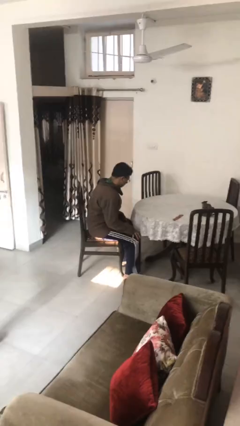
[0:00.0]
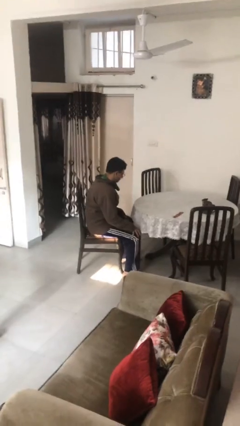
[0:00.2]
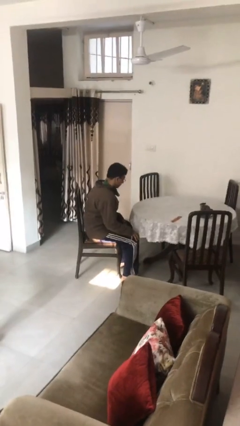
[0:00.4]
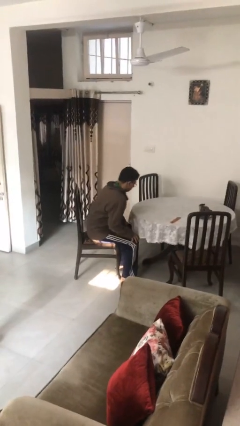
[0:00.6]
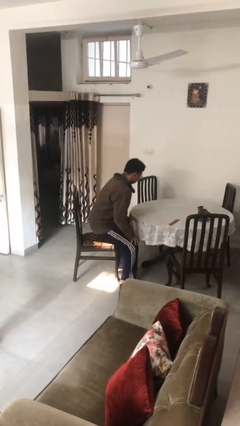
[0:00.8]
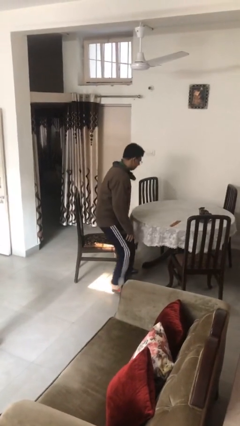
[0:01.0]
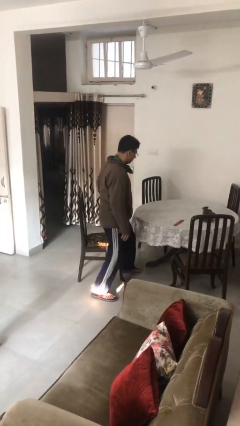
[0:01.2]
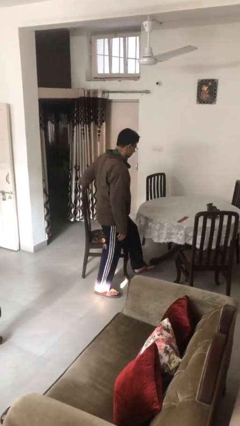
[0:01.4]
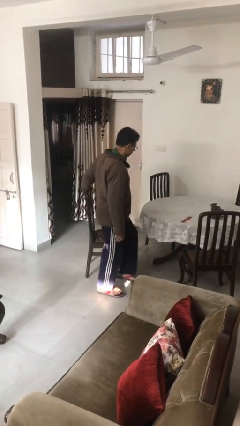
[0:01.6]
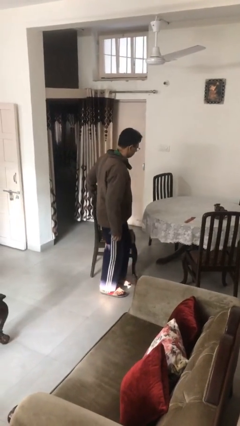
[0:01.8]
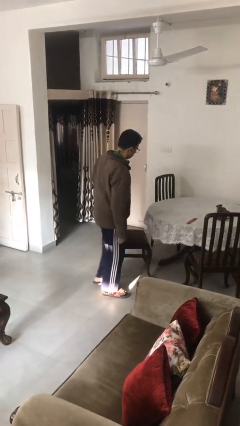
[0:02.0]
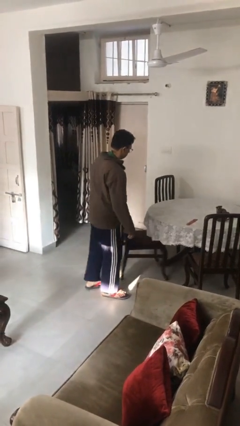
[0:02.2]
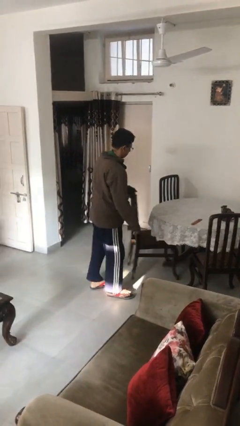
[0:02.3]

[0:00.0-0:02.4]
person stands up

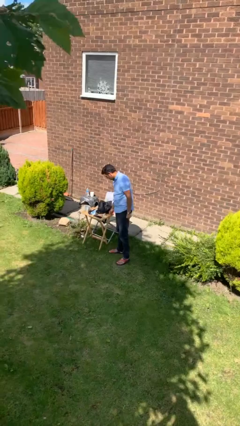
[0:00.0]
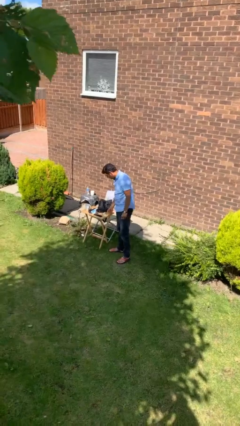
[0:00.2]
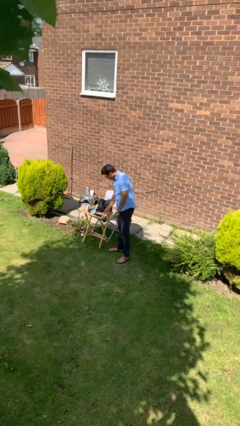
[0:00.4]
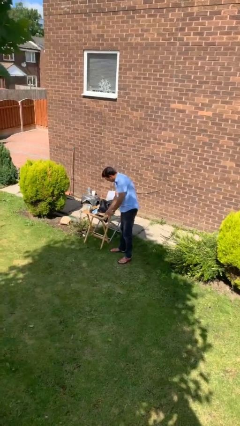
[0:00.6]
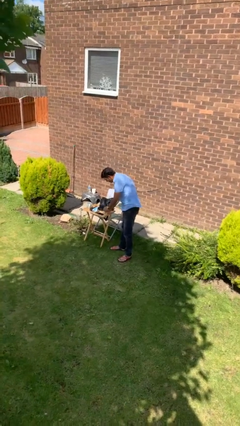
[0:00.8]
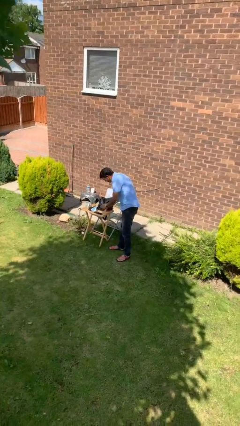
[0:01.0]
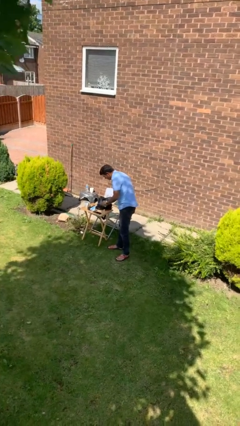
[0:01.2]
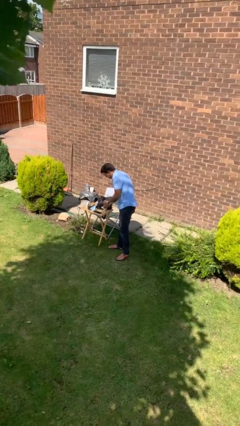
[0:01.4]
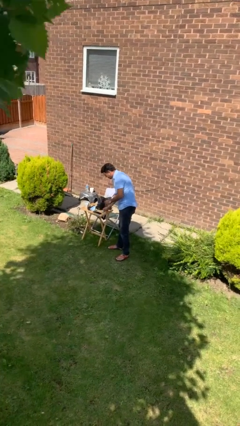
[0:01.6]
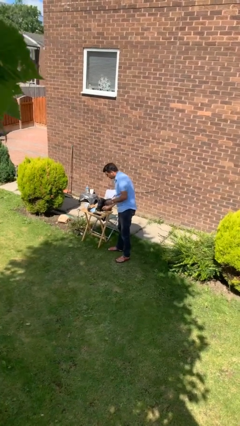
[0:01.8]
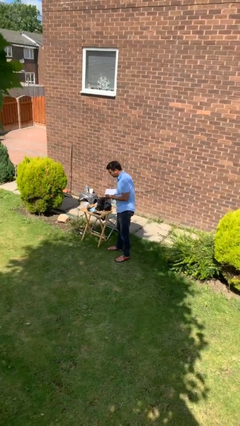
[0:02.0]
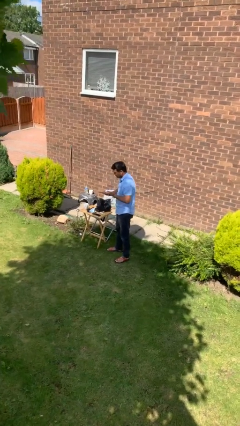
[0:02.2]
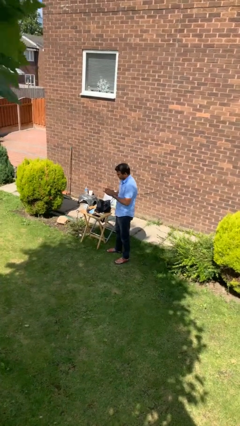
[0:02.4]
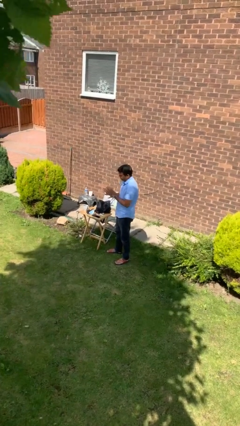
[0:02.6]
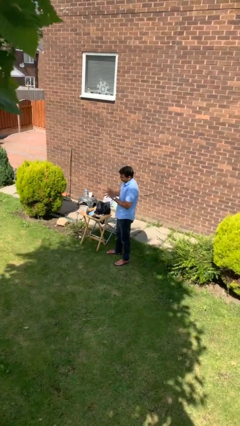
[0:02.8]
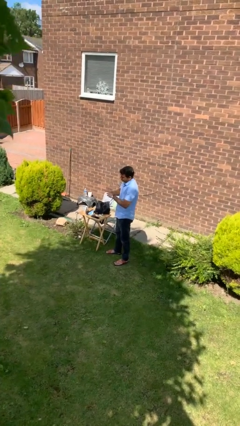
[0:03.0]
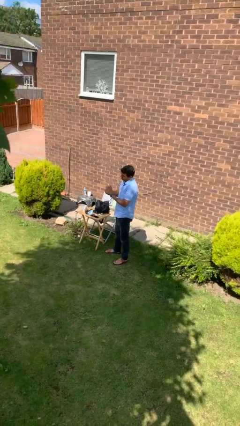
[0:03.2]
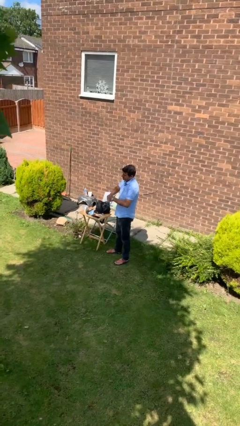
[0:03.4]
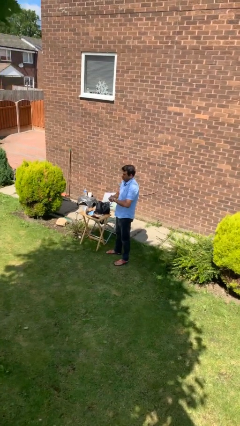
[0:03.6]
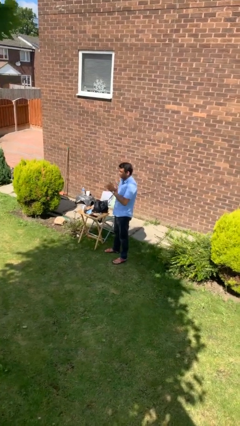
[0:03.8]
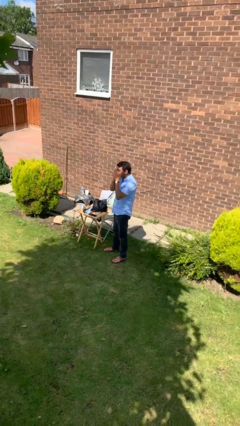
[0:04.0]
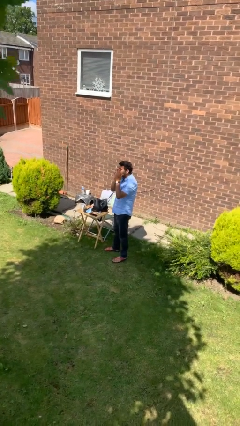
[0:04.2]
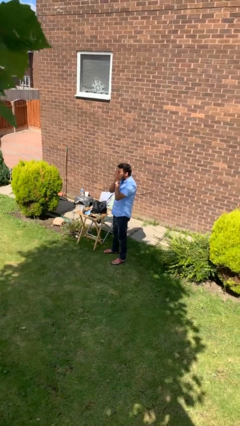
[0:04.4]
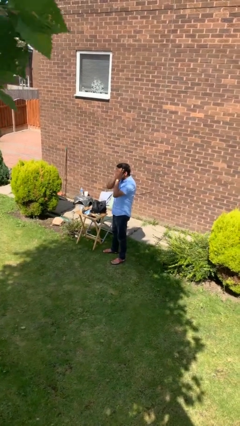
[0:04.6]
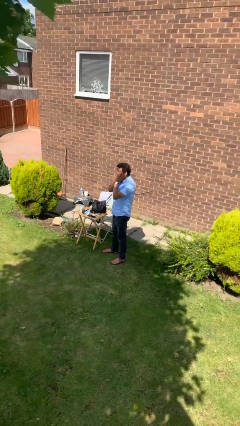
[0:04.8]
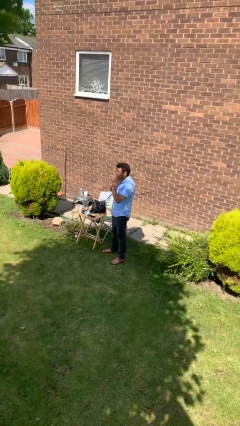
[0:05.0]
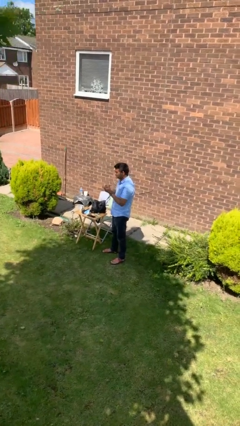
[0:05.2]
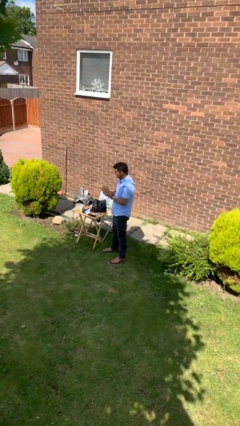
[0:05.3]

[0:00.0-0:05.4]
person applies facial moisturizer

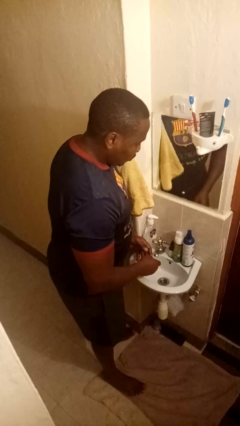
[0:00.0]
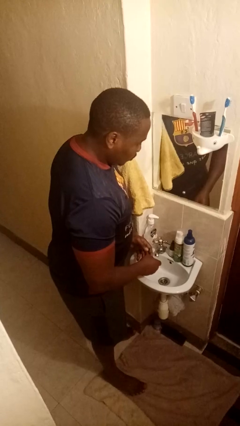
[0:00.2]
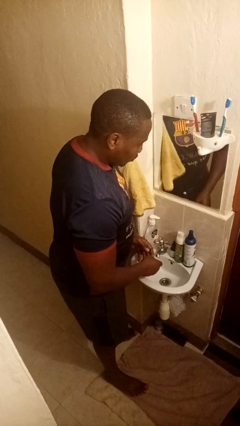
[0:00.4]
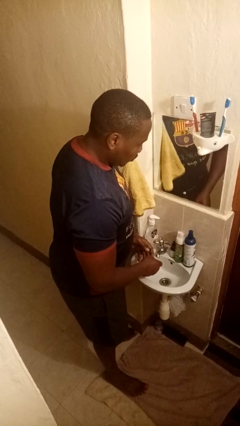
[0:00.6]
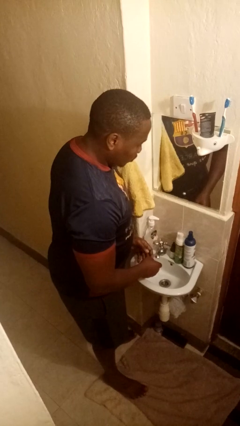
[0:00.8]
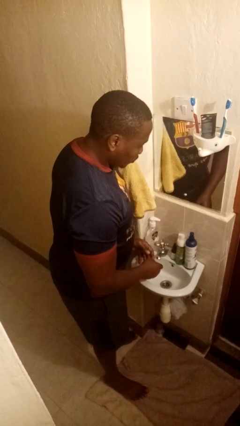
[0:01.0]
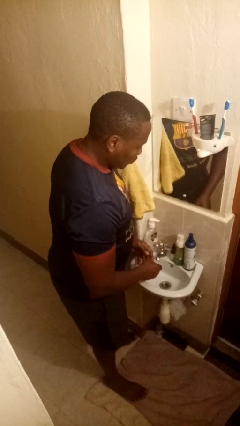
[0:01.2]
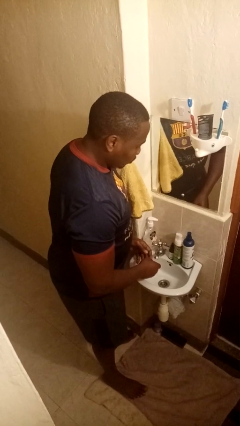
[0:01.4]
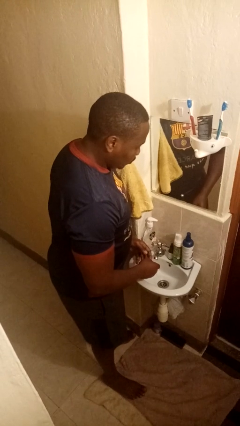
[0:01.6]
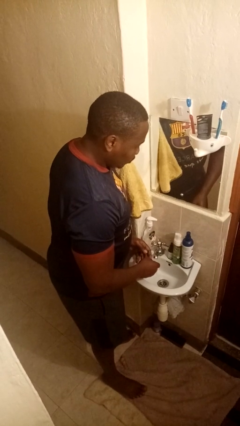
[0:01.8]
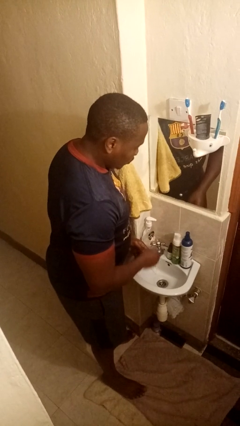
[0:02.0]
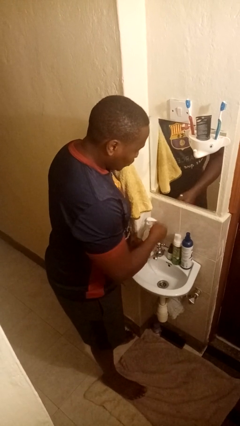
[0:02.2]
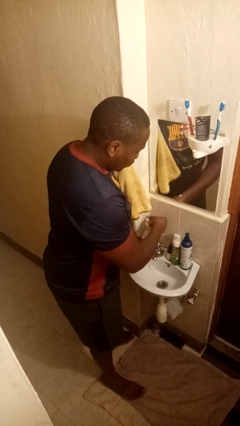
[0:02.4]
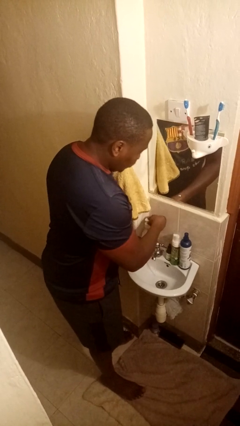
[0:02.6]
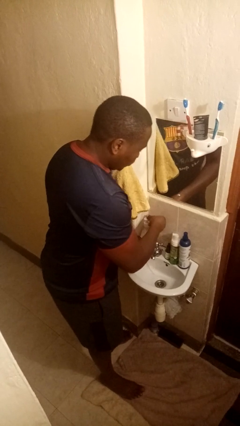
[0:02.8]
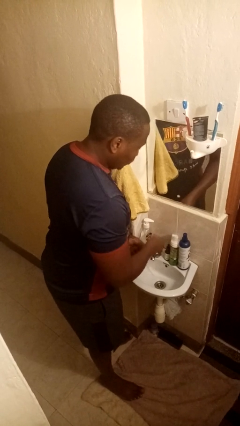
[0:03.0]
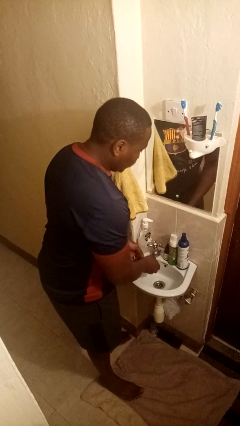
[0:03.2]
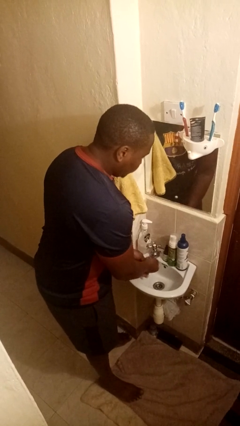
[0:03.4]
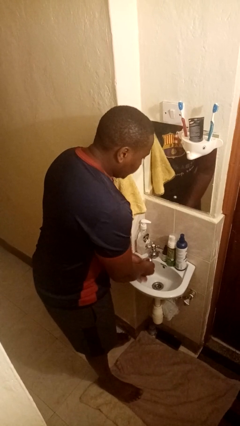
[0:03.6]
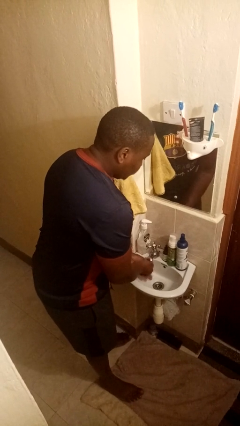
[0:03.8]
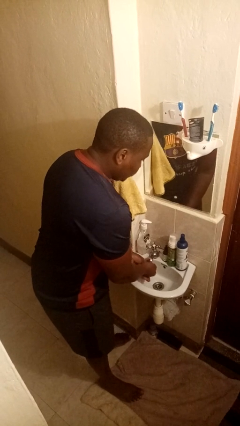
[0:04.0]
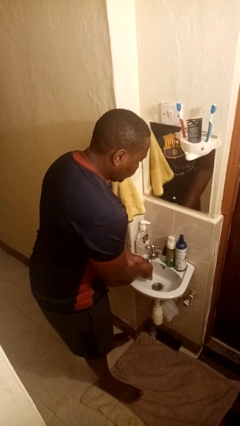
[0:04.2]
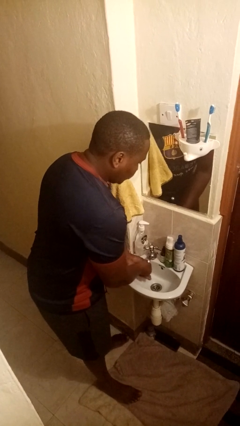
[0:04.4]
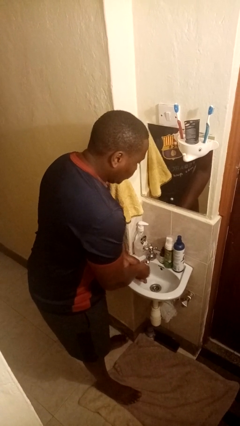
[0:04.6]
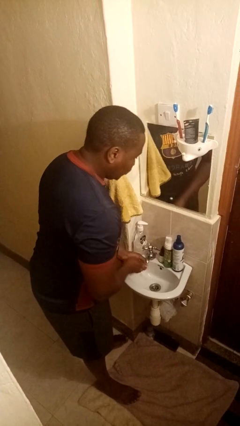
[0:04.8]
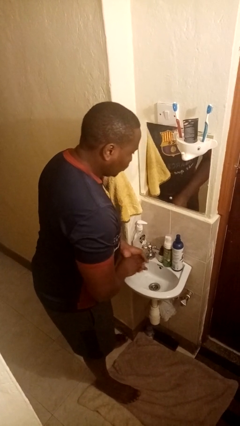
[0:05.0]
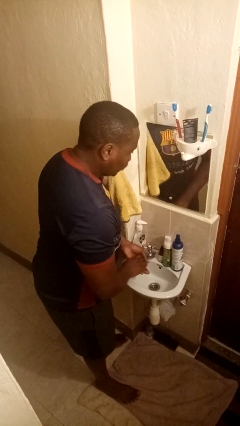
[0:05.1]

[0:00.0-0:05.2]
person washes hands

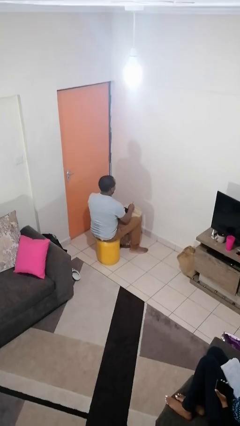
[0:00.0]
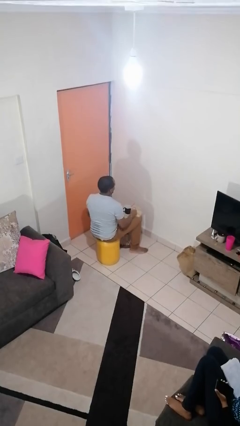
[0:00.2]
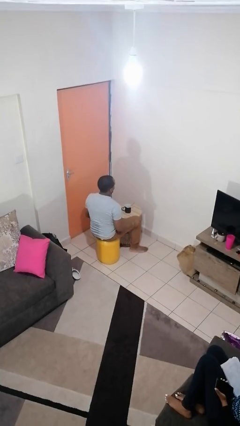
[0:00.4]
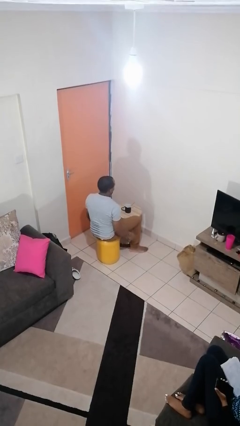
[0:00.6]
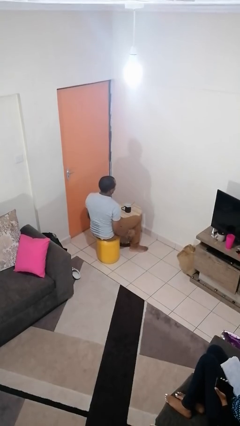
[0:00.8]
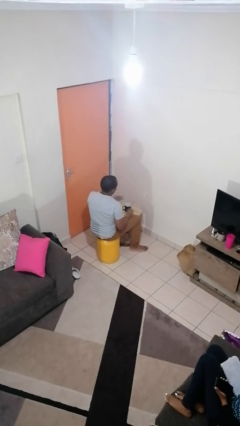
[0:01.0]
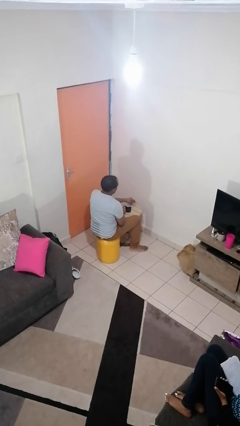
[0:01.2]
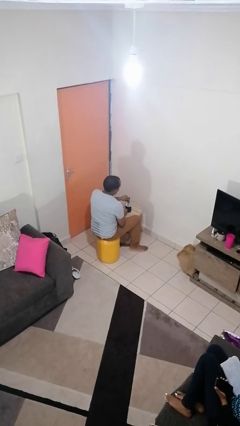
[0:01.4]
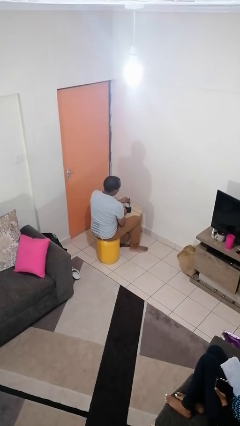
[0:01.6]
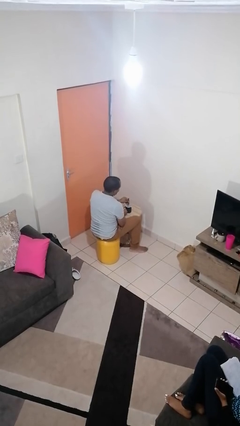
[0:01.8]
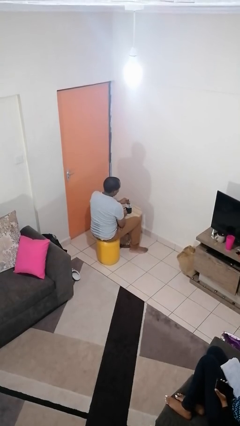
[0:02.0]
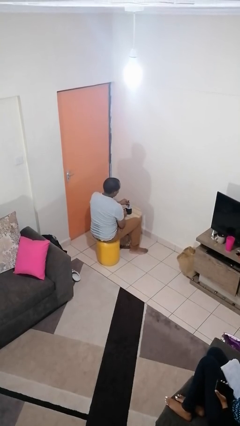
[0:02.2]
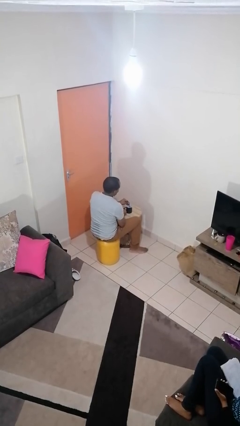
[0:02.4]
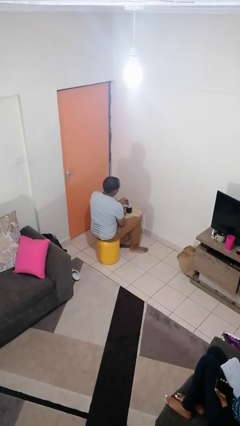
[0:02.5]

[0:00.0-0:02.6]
person stirs mug

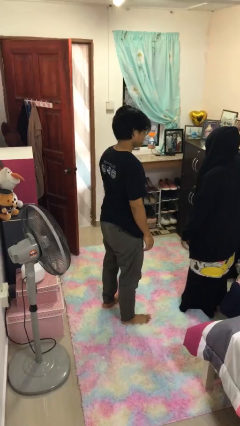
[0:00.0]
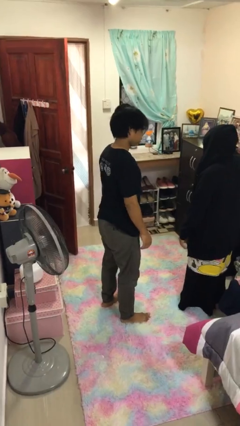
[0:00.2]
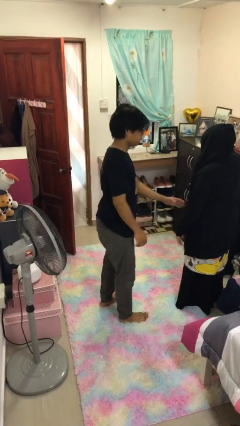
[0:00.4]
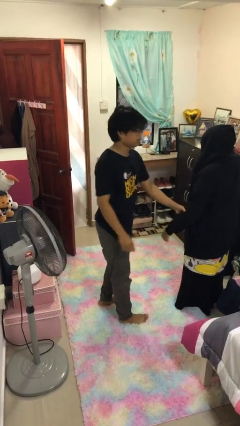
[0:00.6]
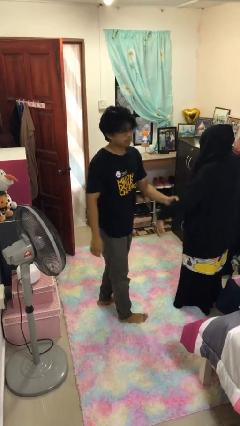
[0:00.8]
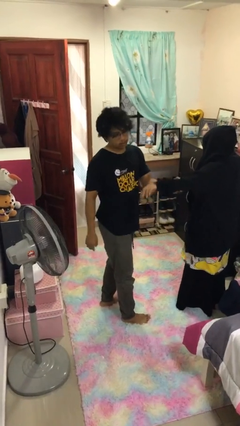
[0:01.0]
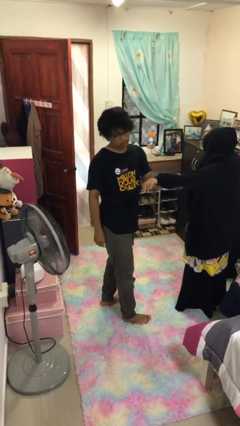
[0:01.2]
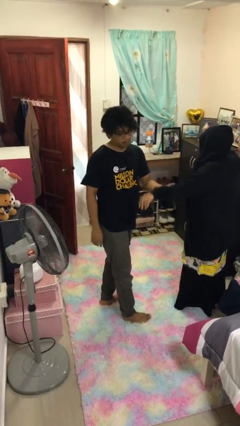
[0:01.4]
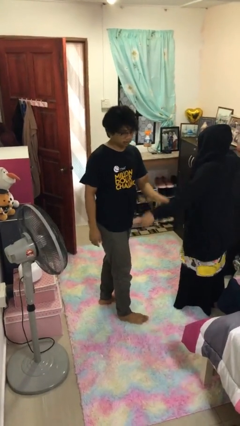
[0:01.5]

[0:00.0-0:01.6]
person grabs person by forearm

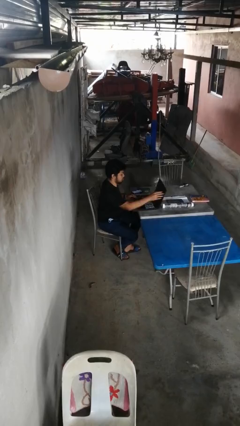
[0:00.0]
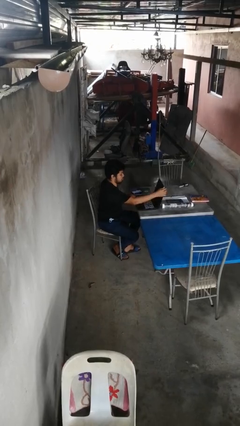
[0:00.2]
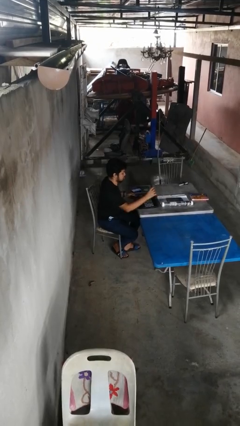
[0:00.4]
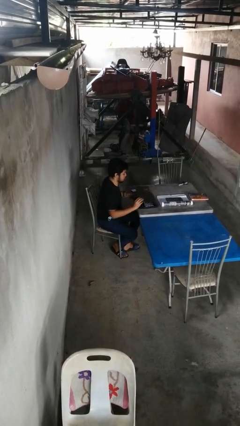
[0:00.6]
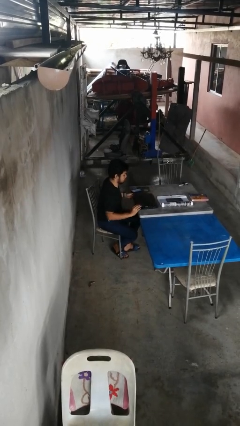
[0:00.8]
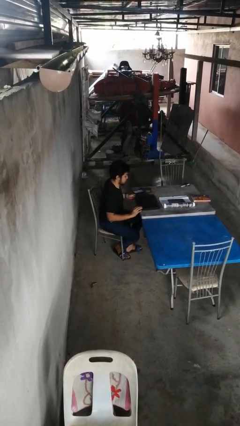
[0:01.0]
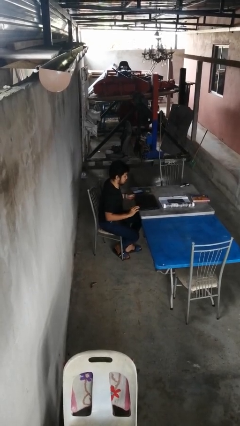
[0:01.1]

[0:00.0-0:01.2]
person closes laptop
